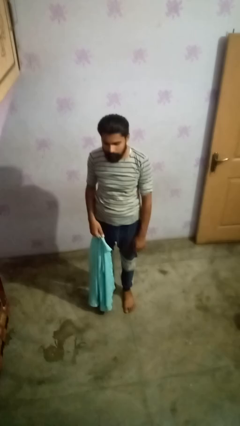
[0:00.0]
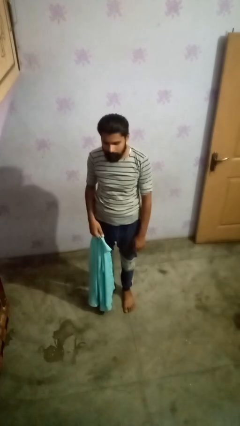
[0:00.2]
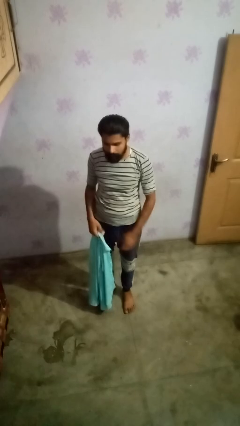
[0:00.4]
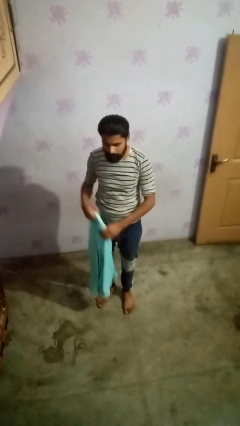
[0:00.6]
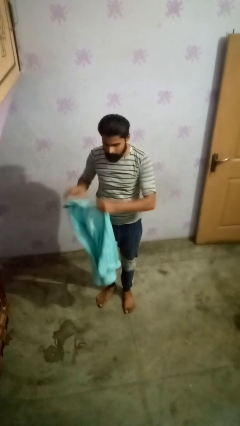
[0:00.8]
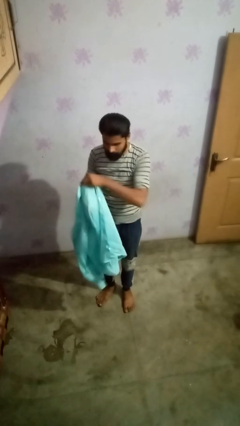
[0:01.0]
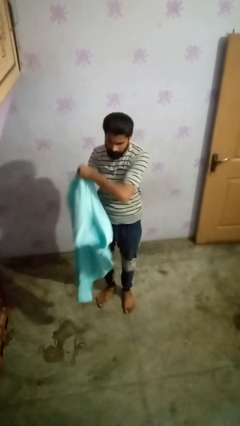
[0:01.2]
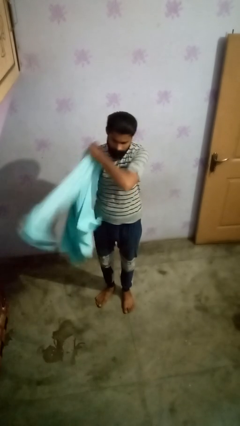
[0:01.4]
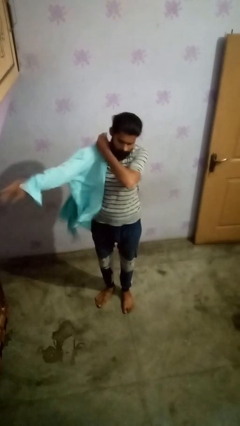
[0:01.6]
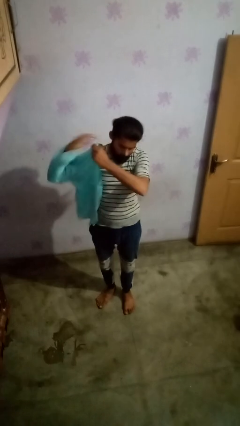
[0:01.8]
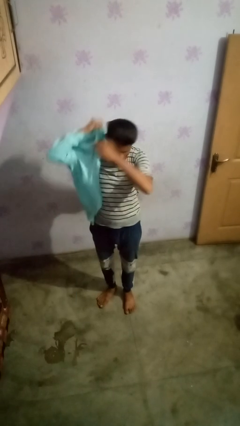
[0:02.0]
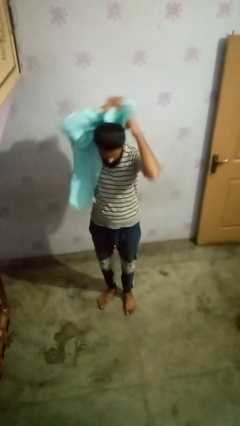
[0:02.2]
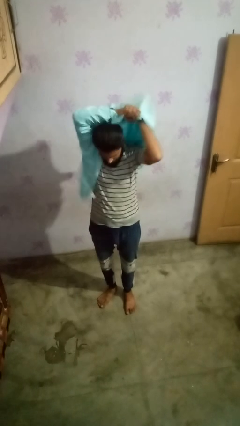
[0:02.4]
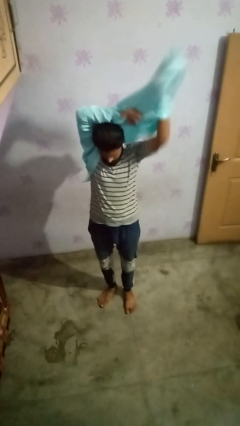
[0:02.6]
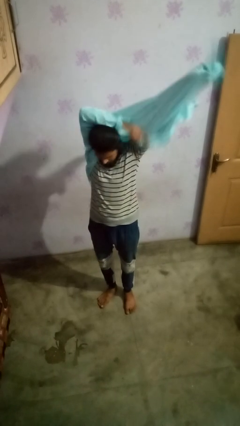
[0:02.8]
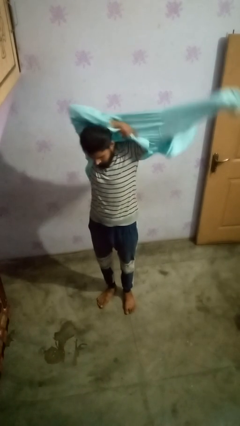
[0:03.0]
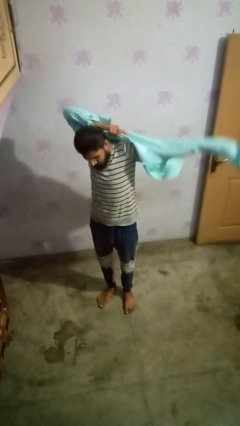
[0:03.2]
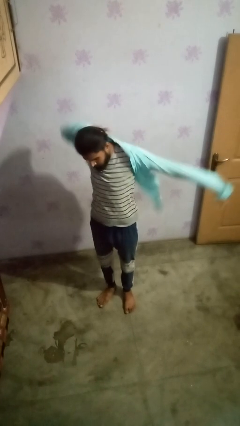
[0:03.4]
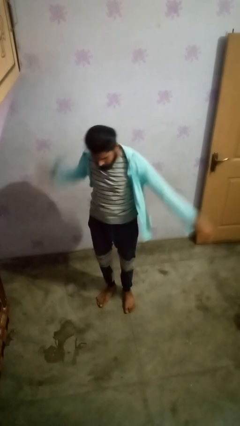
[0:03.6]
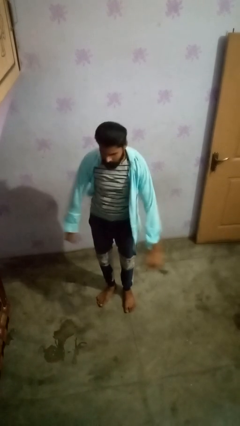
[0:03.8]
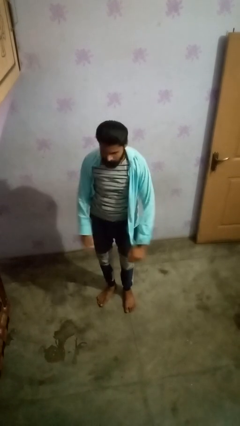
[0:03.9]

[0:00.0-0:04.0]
person puts on shirt

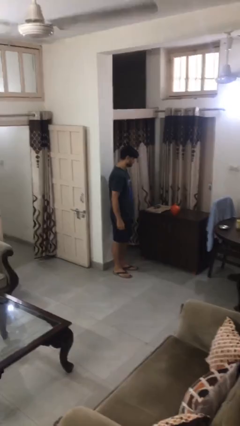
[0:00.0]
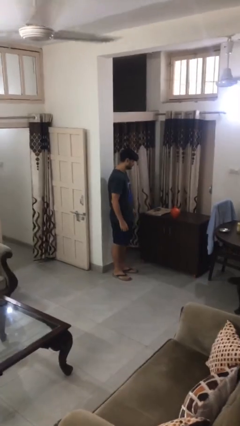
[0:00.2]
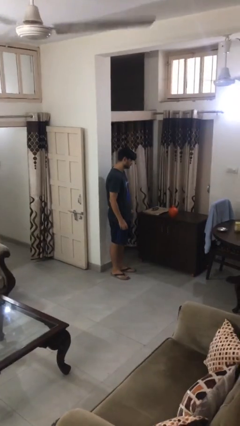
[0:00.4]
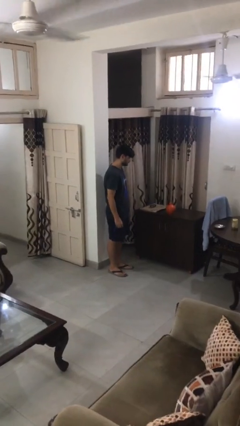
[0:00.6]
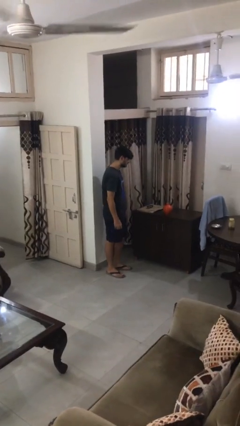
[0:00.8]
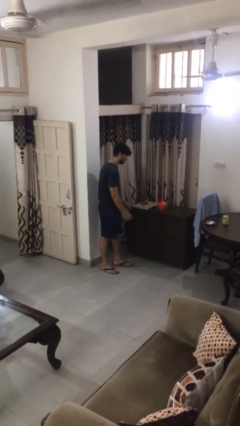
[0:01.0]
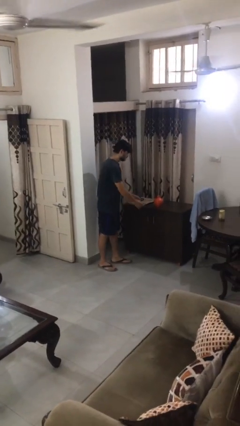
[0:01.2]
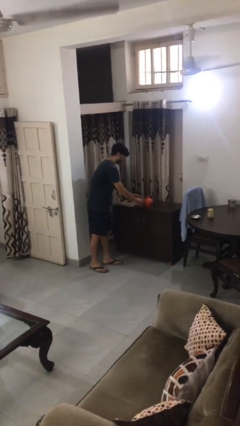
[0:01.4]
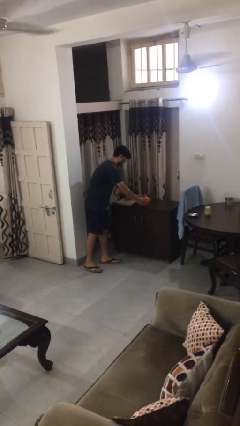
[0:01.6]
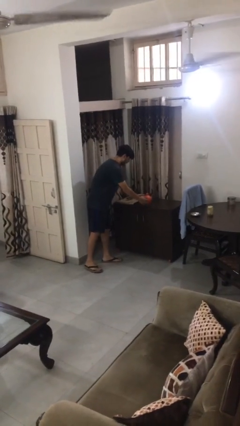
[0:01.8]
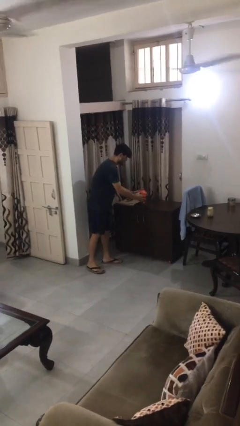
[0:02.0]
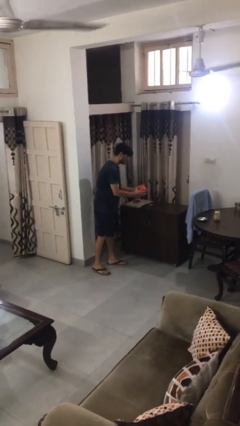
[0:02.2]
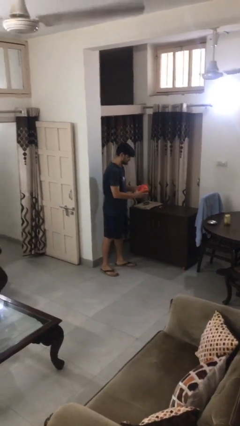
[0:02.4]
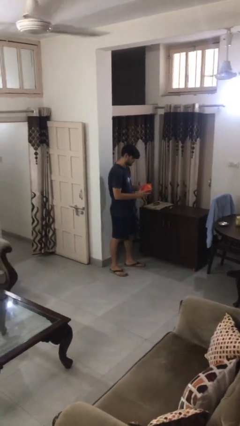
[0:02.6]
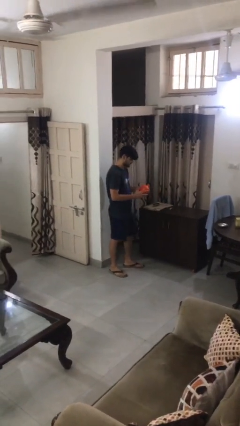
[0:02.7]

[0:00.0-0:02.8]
person picks up object from countertop

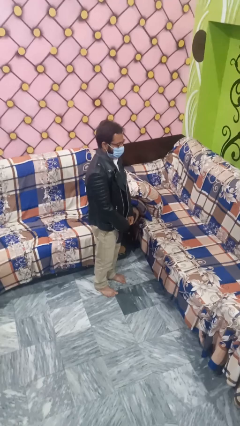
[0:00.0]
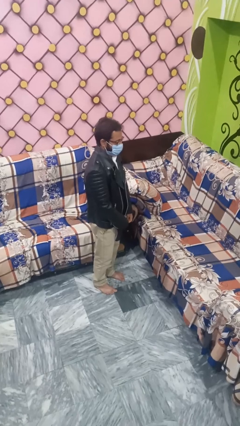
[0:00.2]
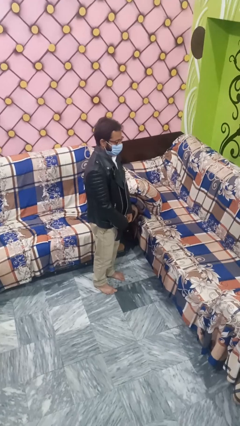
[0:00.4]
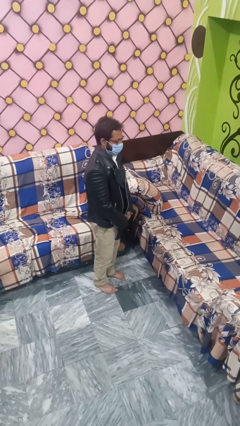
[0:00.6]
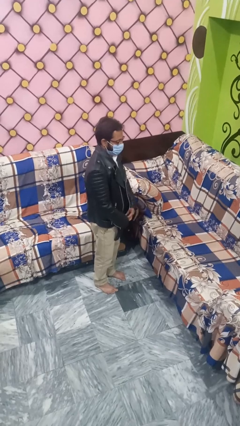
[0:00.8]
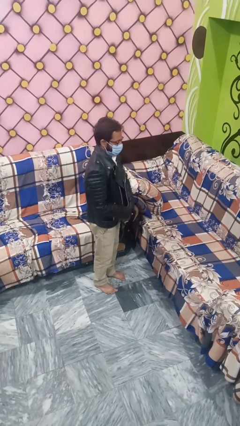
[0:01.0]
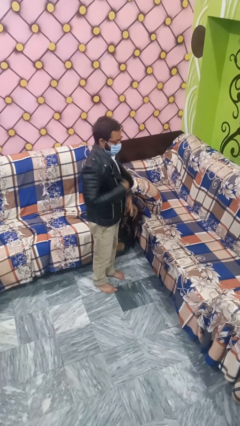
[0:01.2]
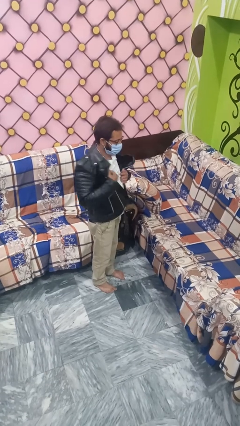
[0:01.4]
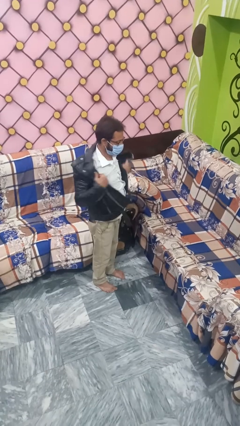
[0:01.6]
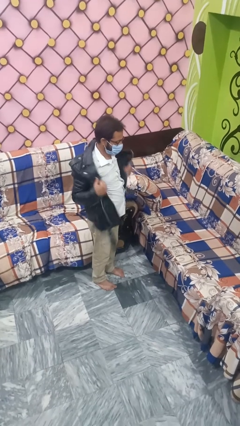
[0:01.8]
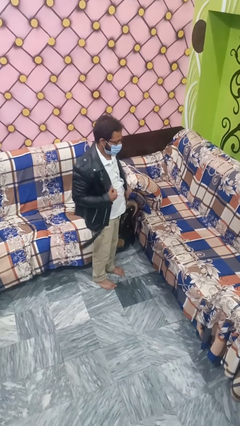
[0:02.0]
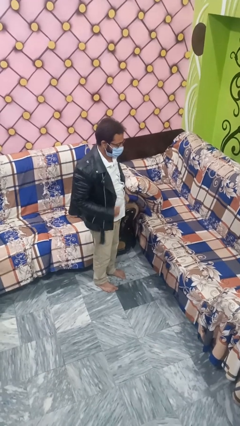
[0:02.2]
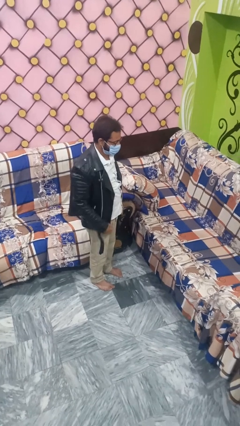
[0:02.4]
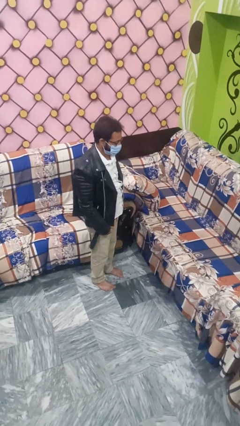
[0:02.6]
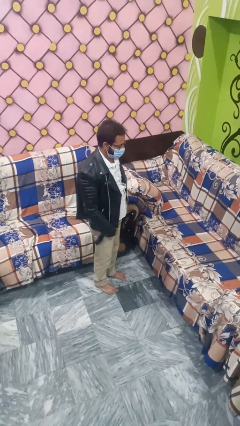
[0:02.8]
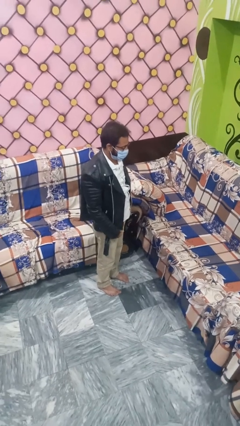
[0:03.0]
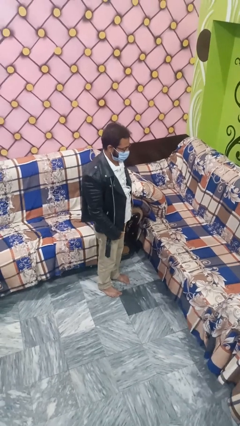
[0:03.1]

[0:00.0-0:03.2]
person unzips jacket

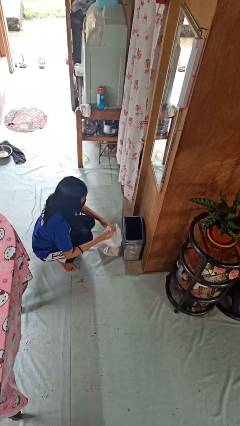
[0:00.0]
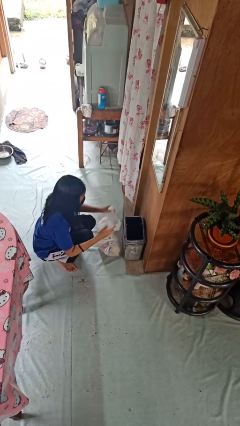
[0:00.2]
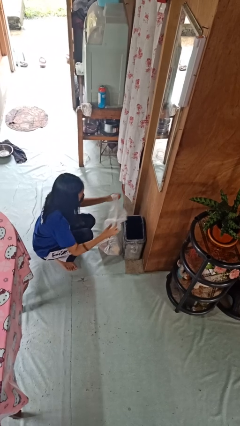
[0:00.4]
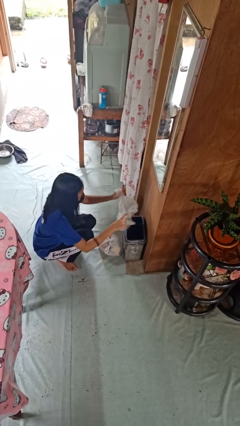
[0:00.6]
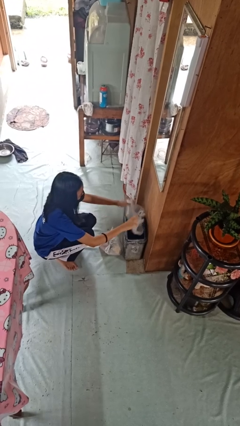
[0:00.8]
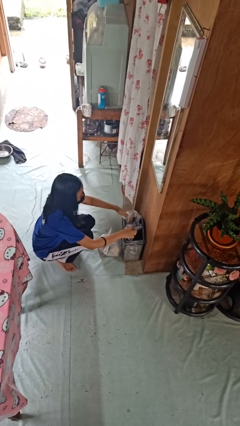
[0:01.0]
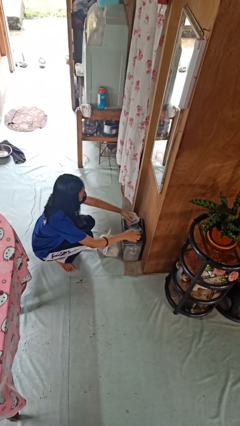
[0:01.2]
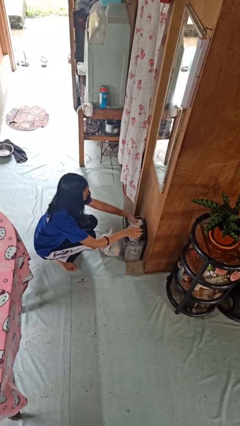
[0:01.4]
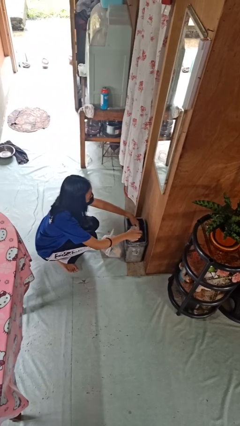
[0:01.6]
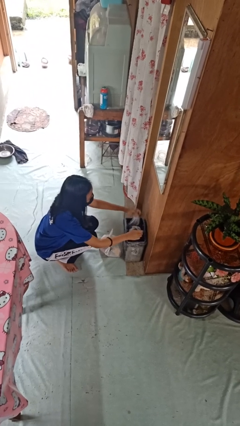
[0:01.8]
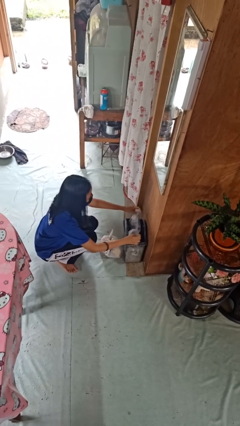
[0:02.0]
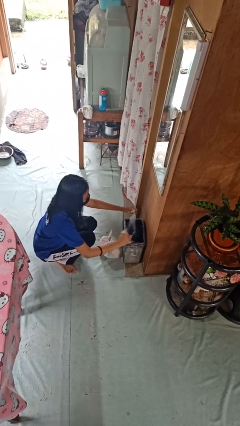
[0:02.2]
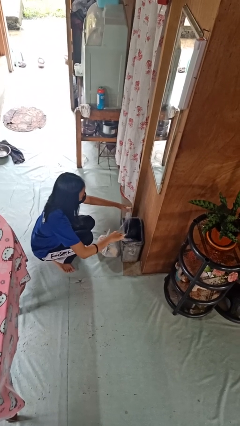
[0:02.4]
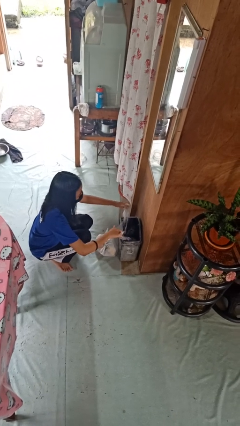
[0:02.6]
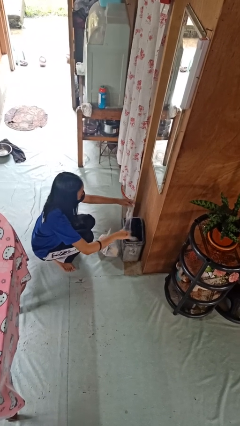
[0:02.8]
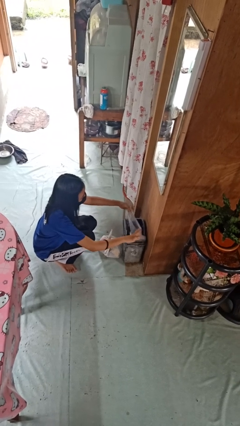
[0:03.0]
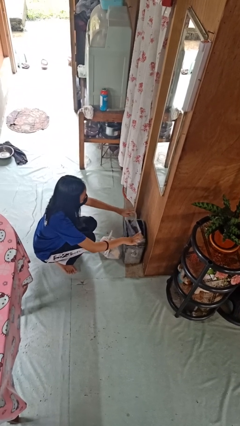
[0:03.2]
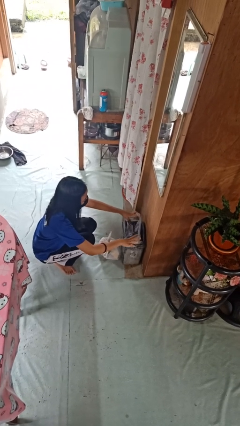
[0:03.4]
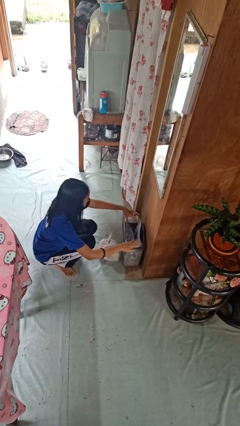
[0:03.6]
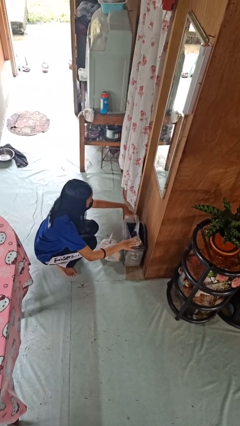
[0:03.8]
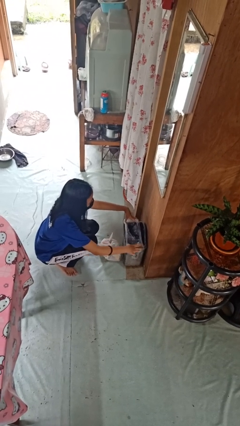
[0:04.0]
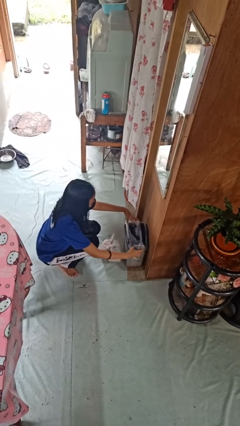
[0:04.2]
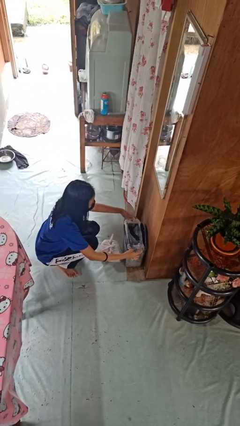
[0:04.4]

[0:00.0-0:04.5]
person inserts trashbag into trashcan

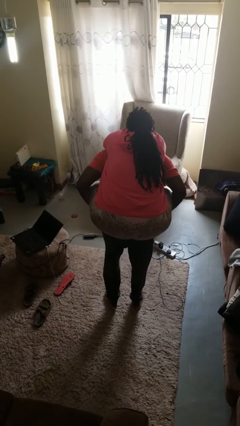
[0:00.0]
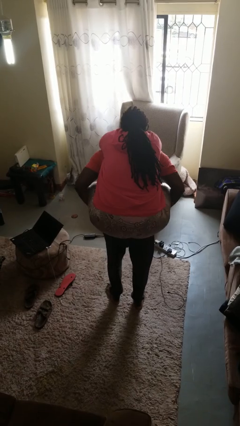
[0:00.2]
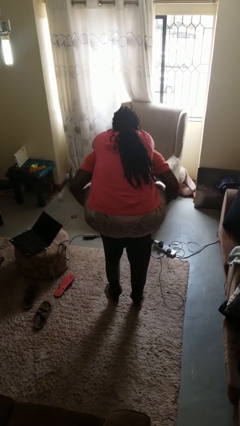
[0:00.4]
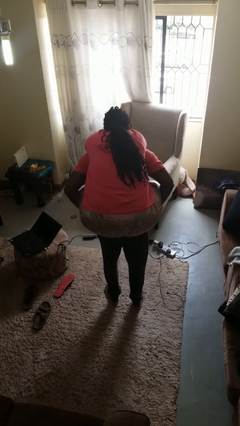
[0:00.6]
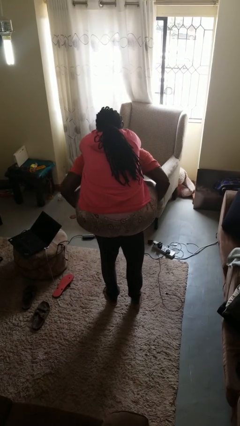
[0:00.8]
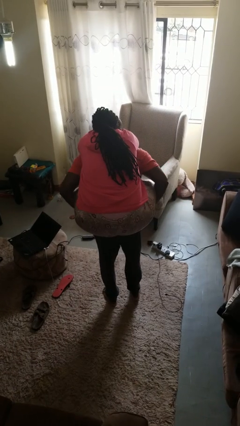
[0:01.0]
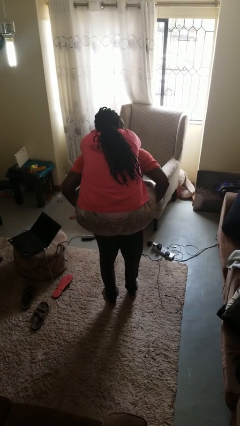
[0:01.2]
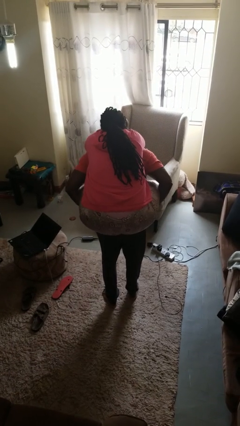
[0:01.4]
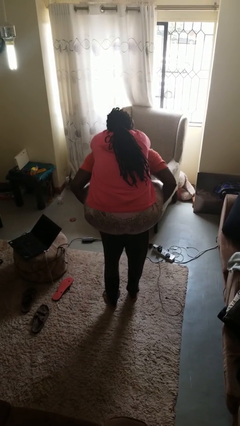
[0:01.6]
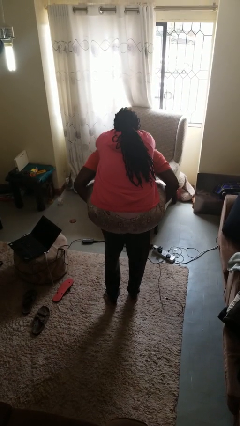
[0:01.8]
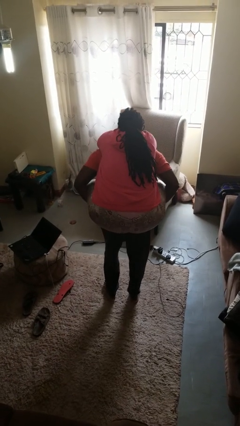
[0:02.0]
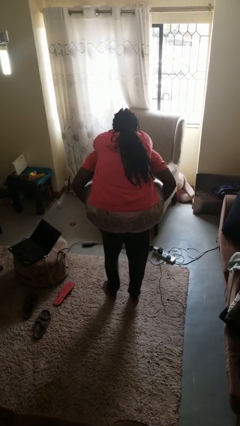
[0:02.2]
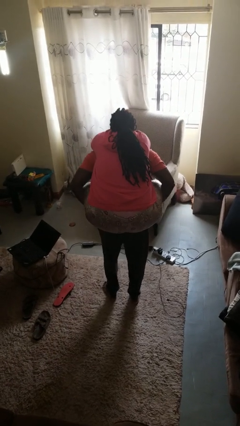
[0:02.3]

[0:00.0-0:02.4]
person carries person on back

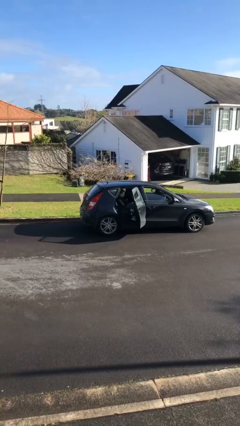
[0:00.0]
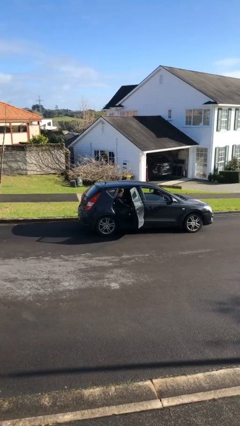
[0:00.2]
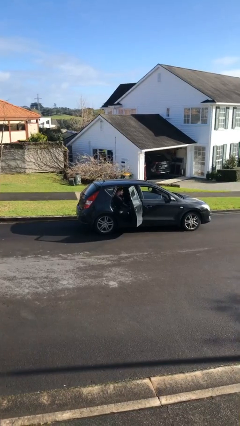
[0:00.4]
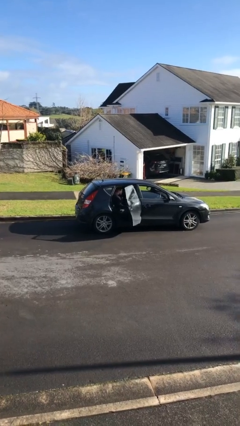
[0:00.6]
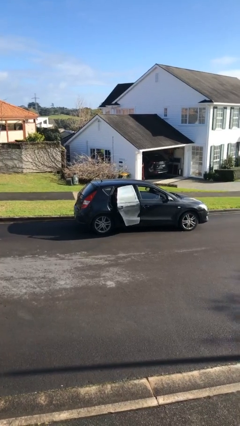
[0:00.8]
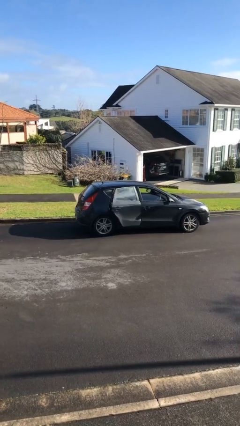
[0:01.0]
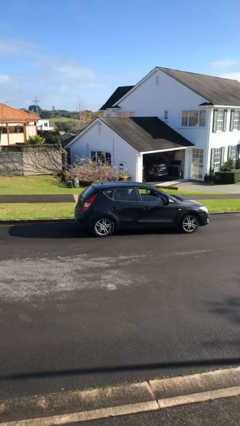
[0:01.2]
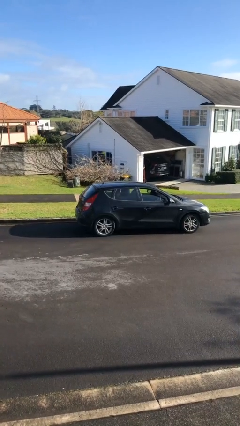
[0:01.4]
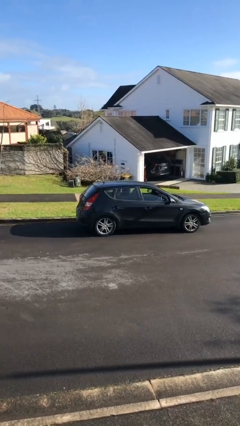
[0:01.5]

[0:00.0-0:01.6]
person closes car door
